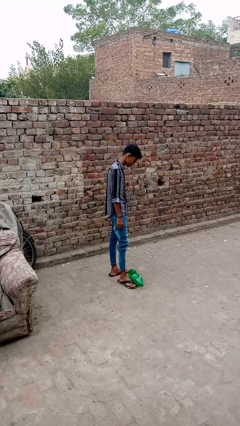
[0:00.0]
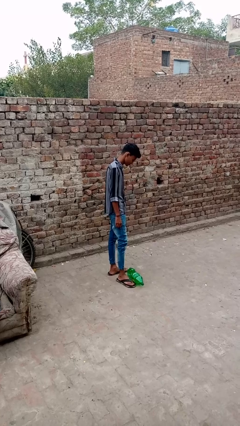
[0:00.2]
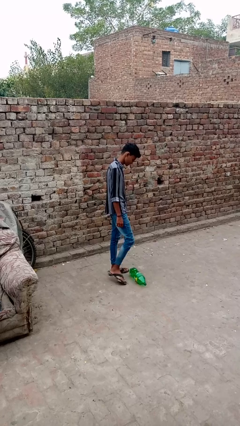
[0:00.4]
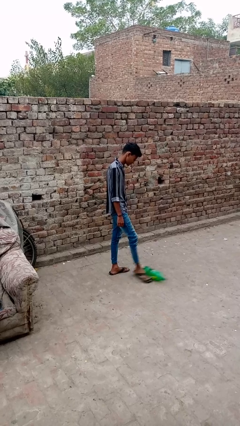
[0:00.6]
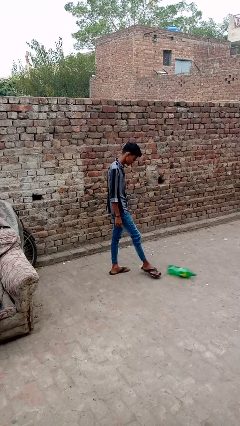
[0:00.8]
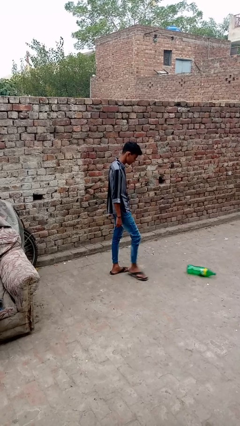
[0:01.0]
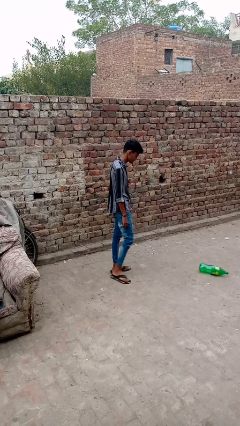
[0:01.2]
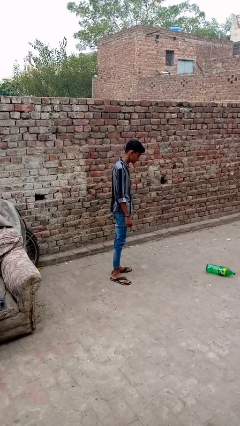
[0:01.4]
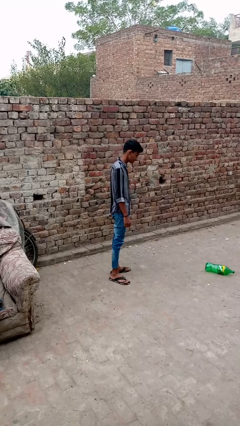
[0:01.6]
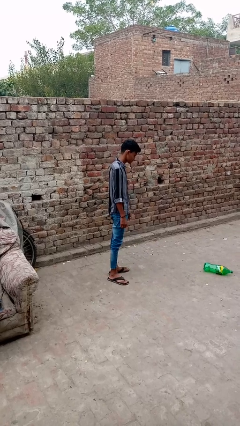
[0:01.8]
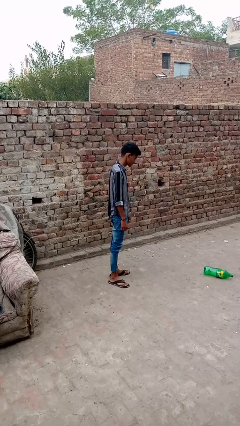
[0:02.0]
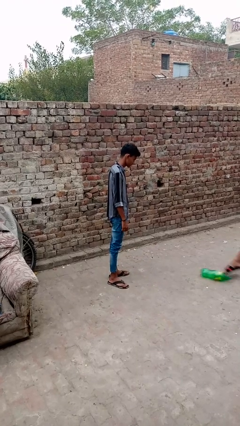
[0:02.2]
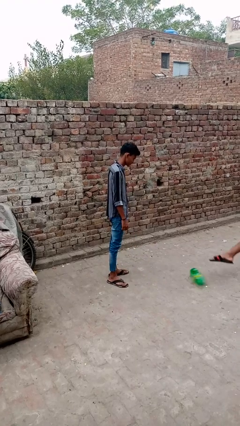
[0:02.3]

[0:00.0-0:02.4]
person kicks object to person

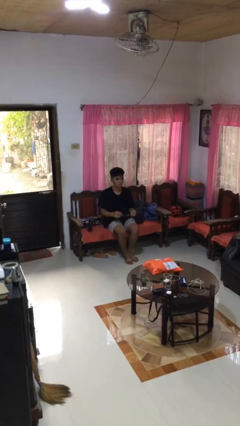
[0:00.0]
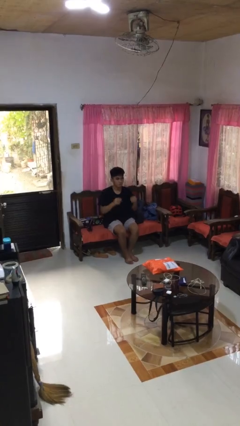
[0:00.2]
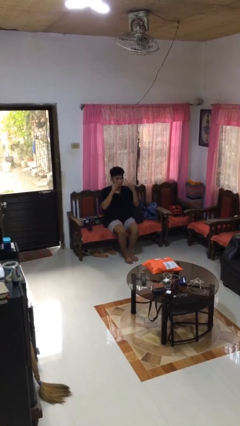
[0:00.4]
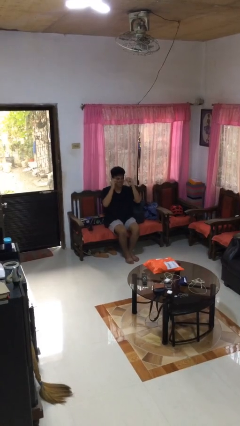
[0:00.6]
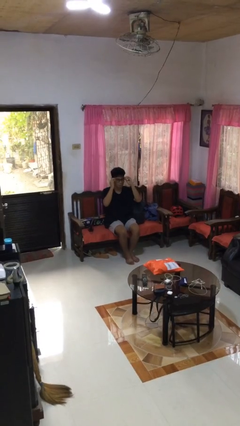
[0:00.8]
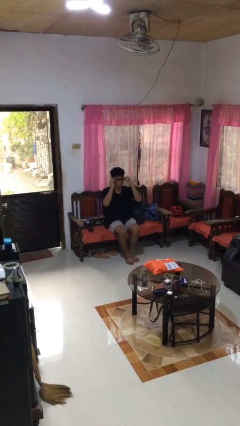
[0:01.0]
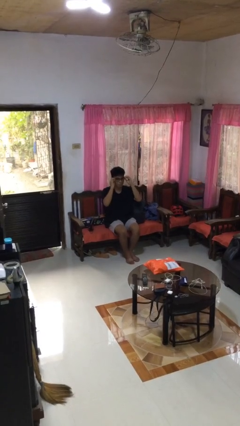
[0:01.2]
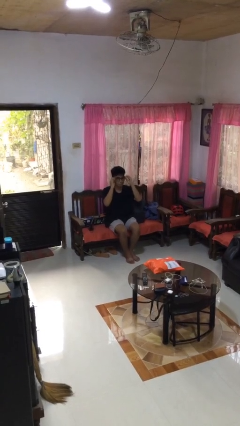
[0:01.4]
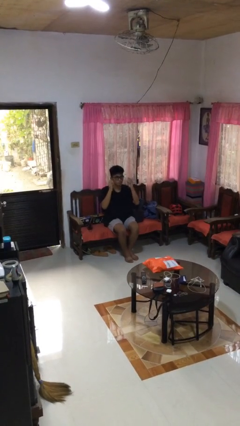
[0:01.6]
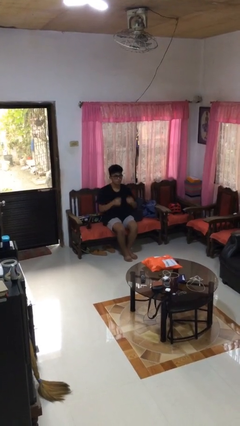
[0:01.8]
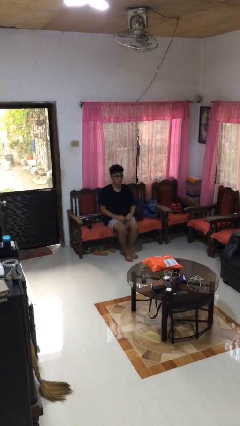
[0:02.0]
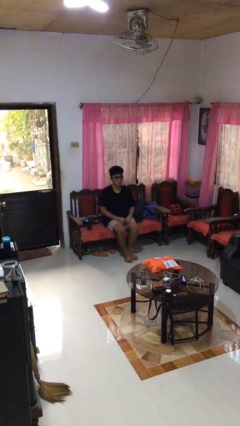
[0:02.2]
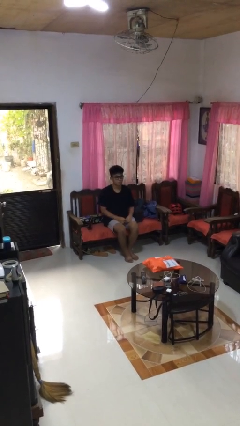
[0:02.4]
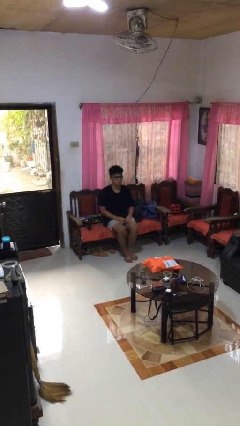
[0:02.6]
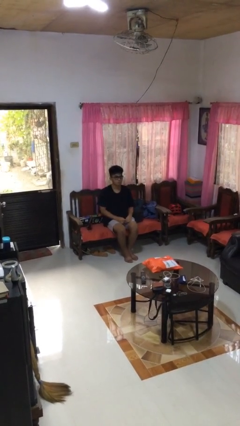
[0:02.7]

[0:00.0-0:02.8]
person puts on glasses

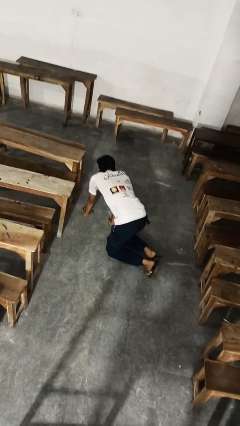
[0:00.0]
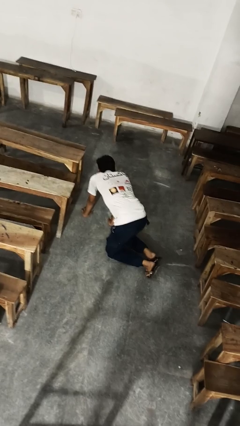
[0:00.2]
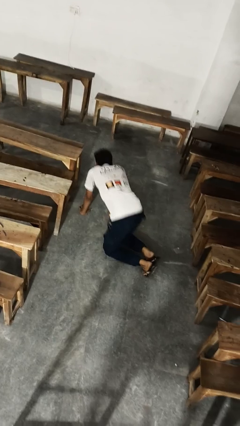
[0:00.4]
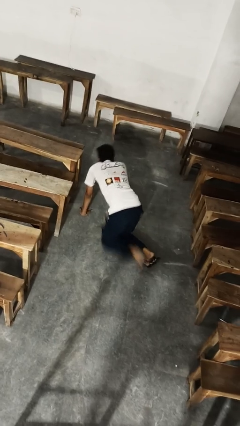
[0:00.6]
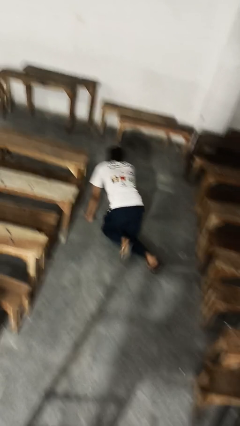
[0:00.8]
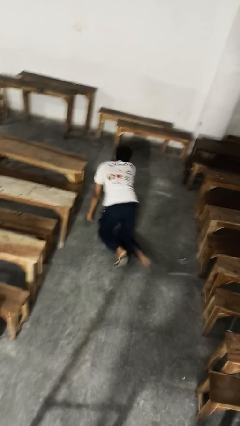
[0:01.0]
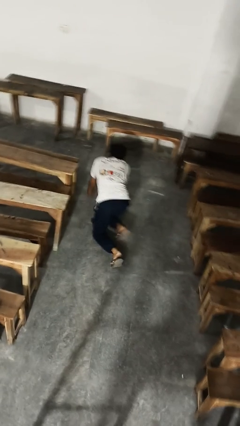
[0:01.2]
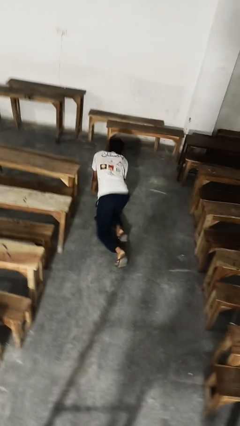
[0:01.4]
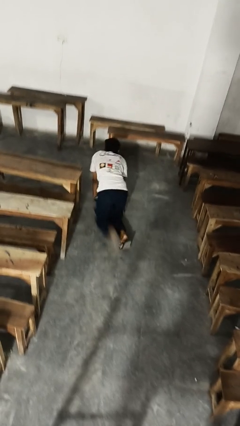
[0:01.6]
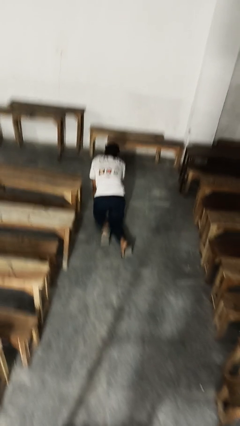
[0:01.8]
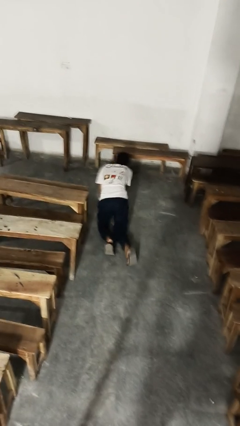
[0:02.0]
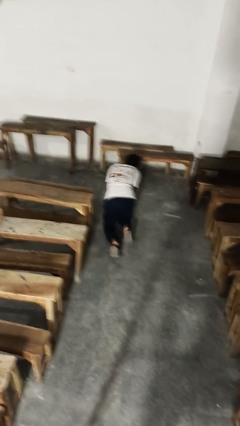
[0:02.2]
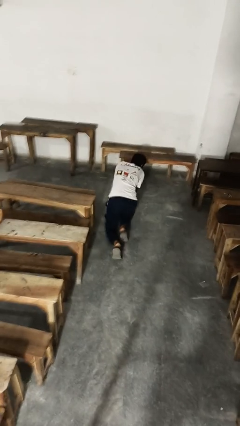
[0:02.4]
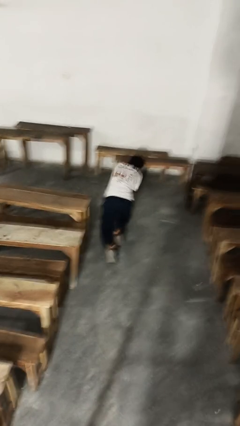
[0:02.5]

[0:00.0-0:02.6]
person crawls

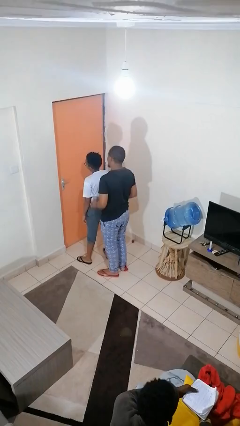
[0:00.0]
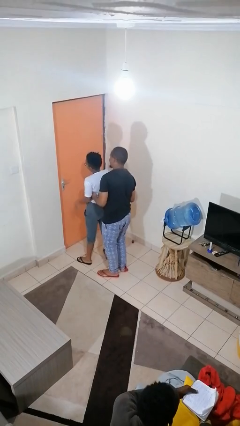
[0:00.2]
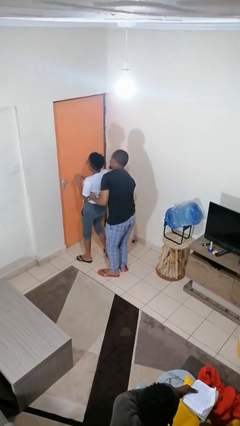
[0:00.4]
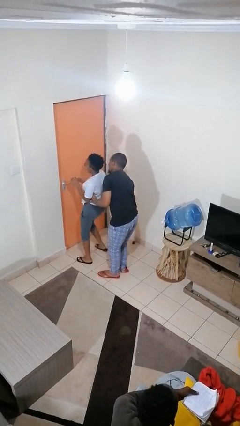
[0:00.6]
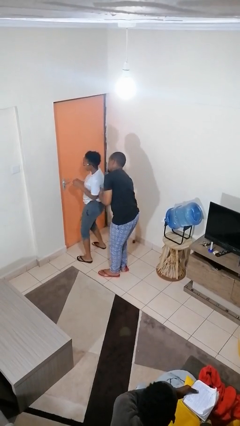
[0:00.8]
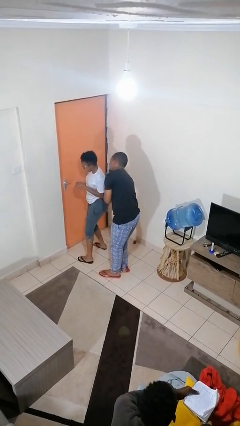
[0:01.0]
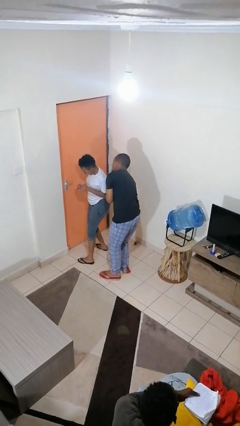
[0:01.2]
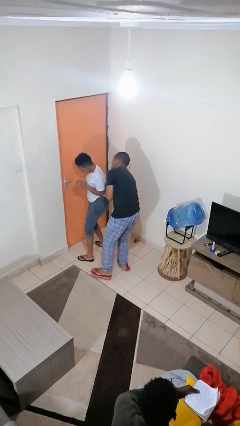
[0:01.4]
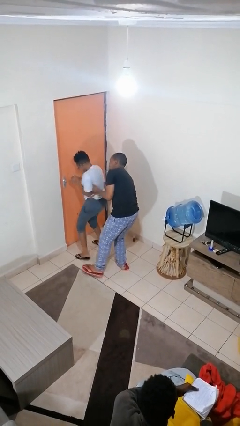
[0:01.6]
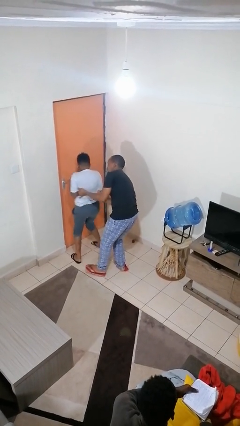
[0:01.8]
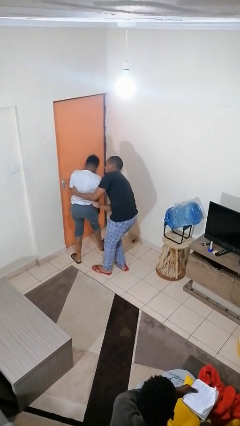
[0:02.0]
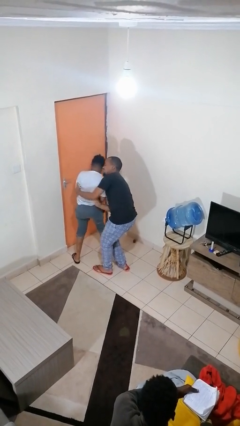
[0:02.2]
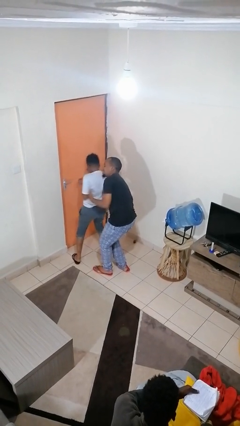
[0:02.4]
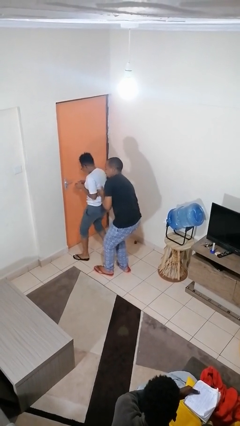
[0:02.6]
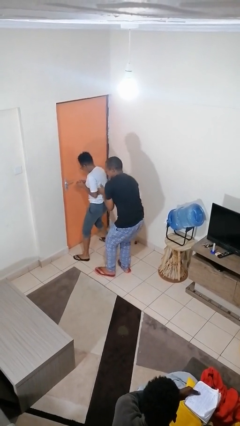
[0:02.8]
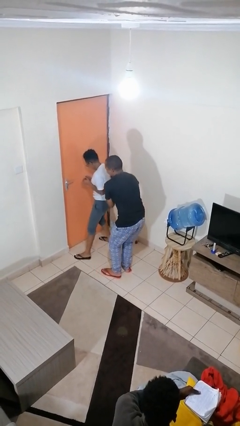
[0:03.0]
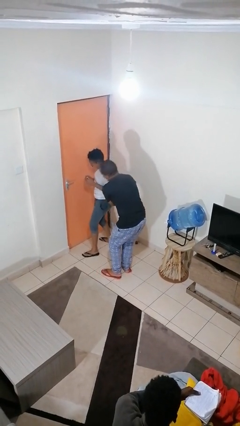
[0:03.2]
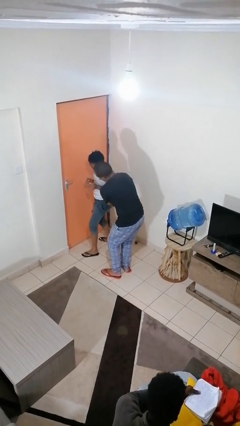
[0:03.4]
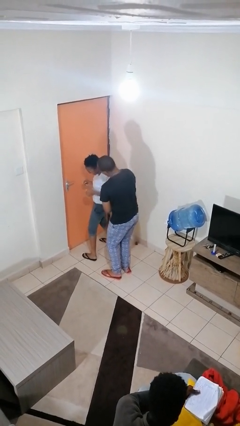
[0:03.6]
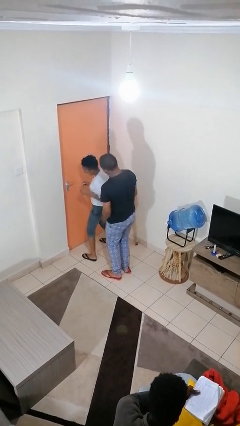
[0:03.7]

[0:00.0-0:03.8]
person tickles person

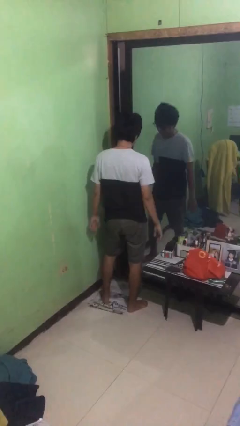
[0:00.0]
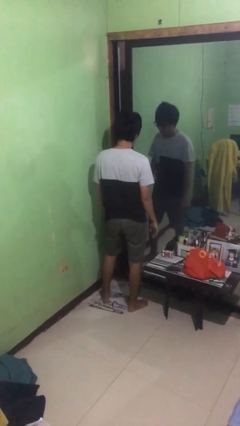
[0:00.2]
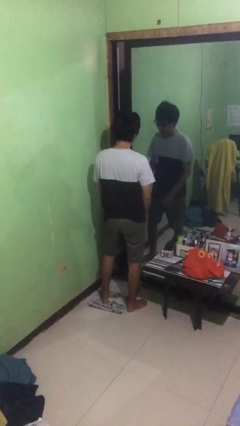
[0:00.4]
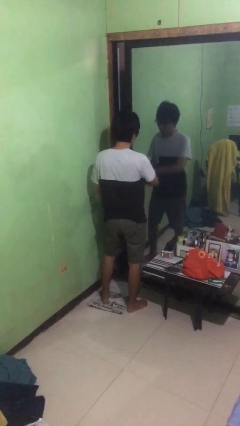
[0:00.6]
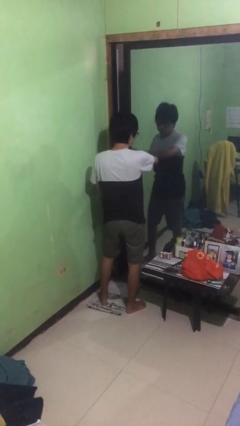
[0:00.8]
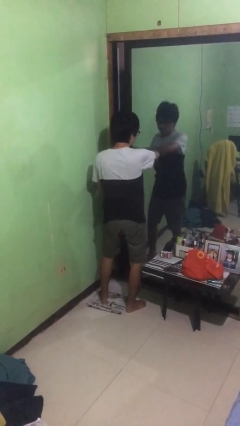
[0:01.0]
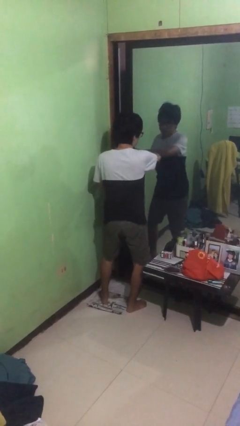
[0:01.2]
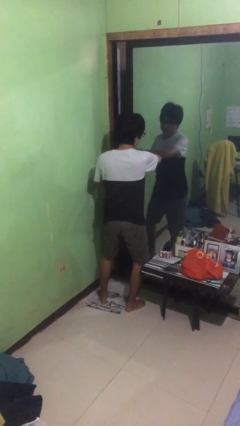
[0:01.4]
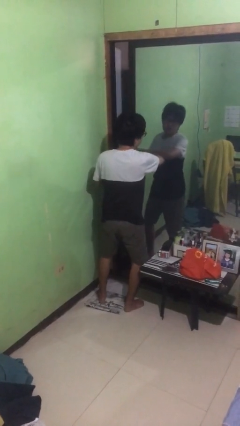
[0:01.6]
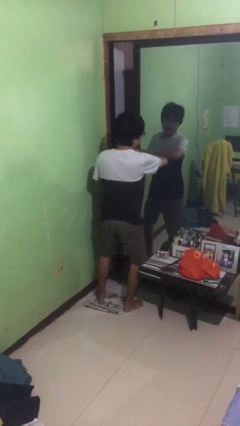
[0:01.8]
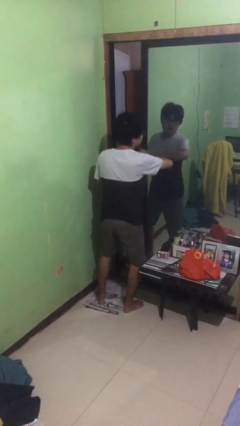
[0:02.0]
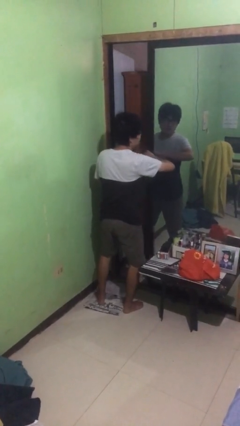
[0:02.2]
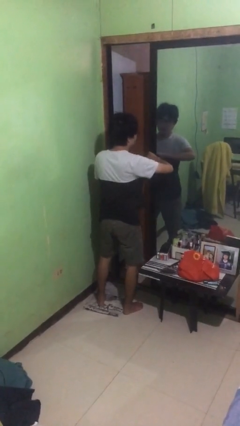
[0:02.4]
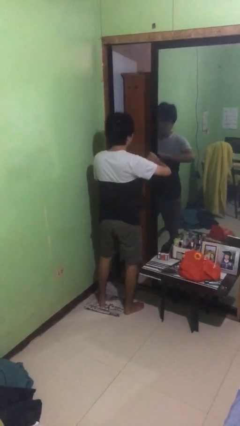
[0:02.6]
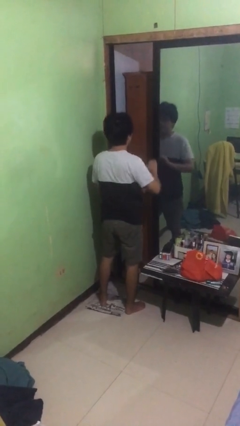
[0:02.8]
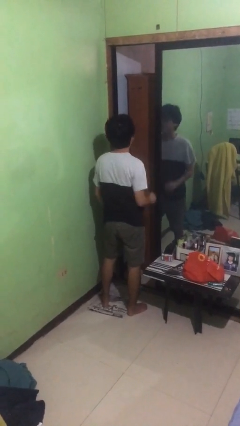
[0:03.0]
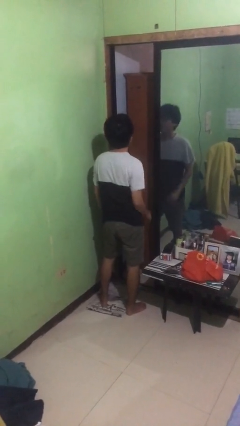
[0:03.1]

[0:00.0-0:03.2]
person opens sliding door

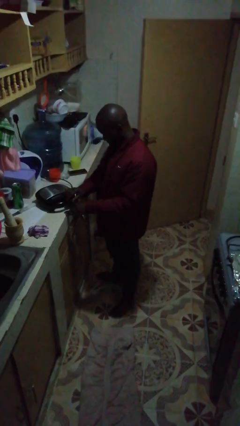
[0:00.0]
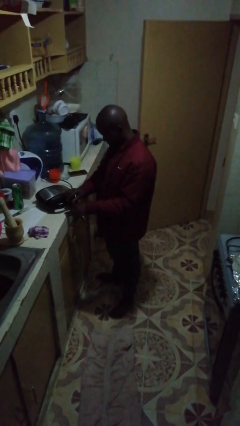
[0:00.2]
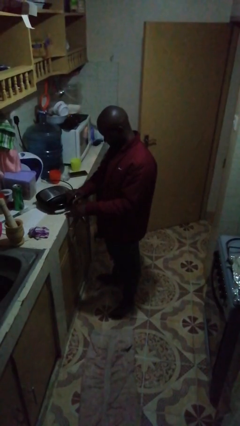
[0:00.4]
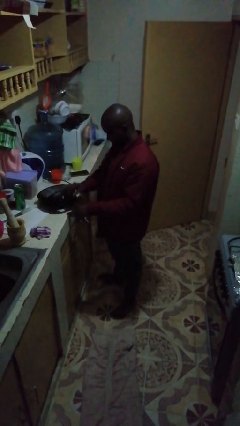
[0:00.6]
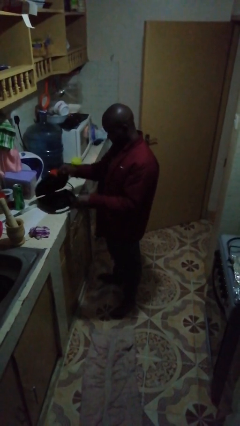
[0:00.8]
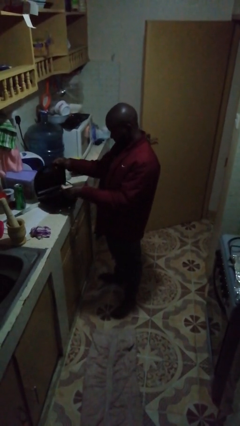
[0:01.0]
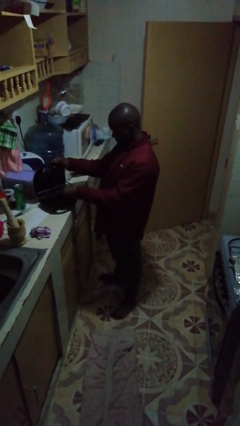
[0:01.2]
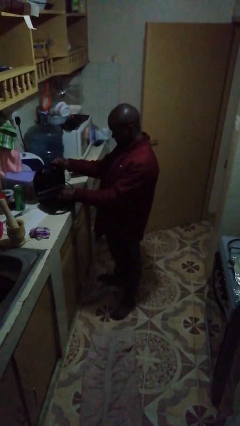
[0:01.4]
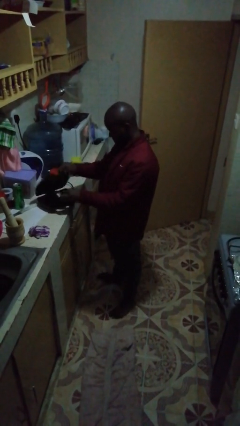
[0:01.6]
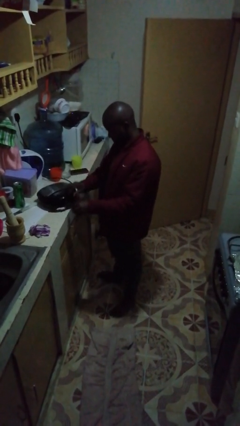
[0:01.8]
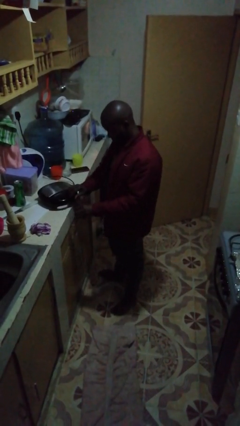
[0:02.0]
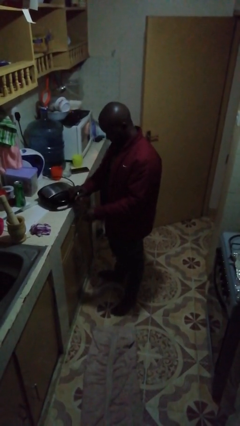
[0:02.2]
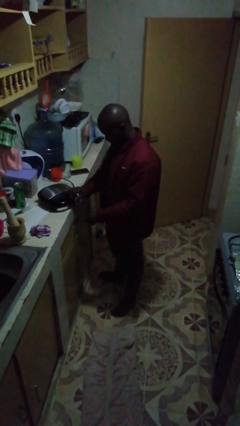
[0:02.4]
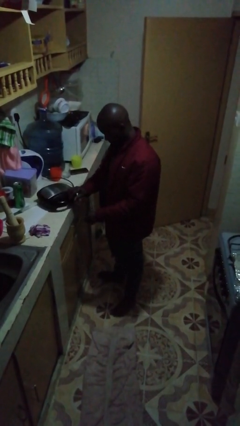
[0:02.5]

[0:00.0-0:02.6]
person puts object into toaster

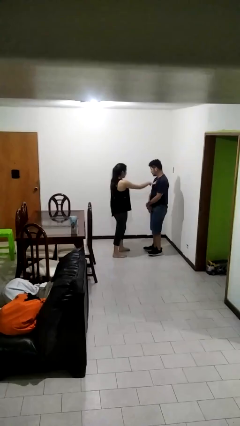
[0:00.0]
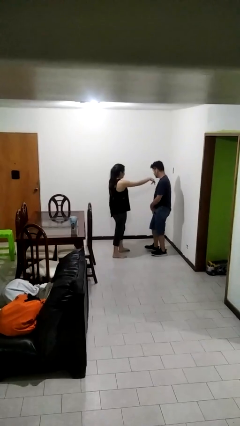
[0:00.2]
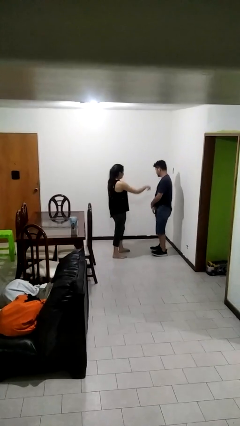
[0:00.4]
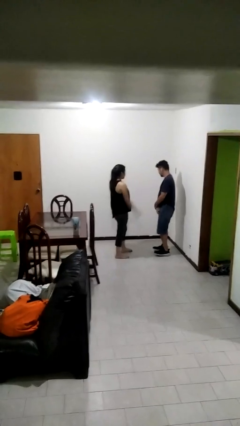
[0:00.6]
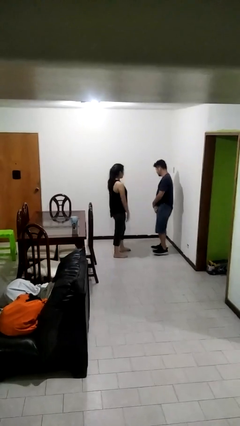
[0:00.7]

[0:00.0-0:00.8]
person shoves person
